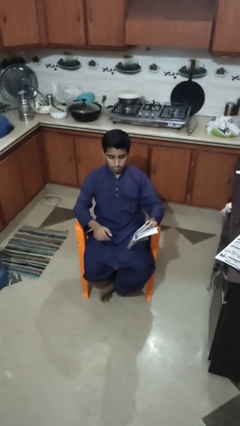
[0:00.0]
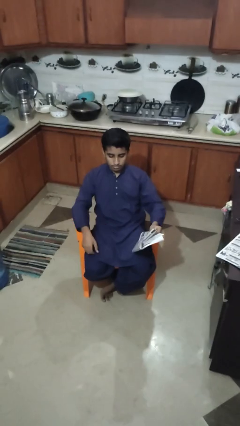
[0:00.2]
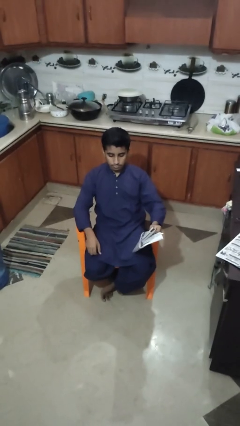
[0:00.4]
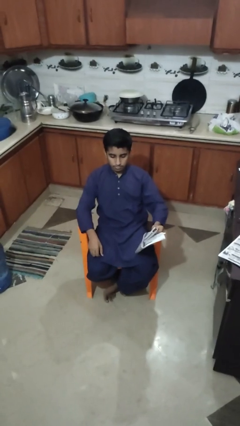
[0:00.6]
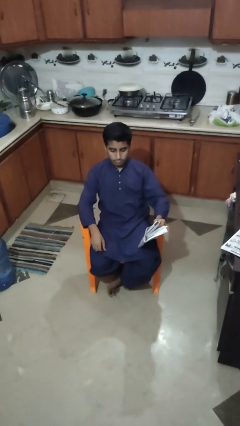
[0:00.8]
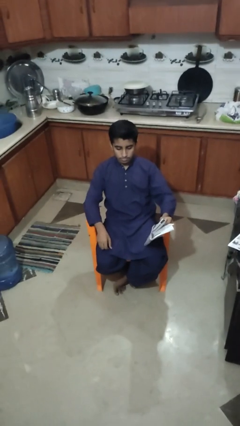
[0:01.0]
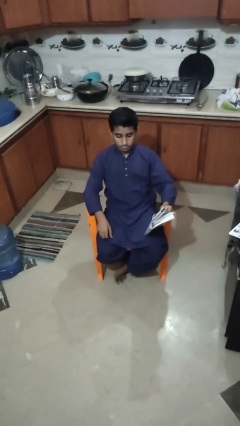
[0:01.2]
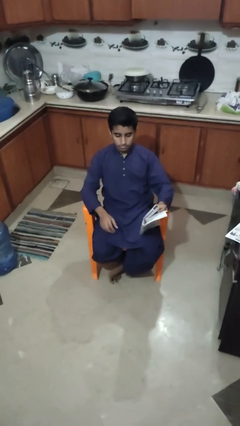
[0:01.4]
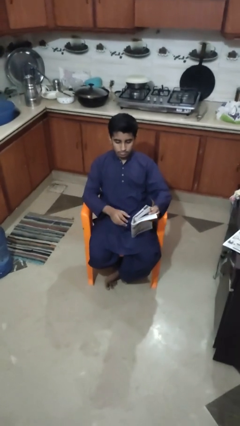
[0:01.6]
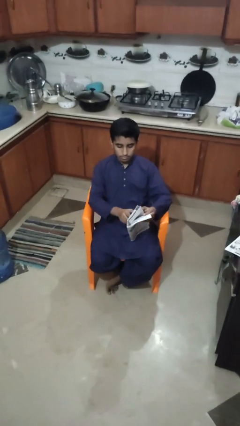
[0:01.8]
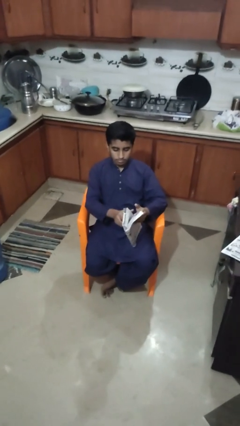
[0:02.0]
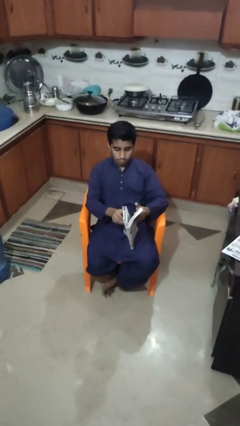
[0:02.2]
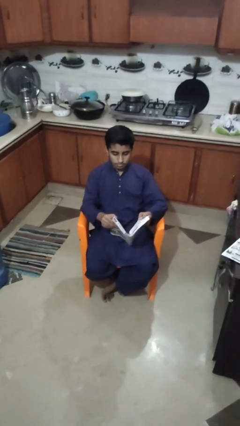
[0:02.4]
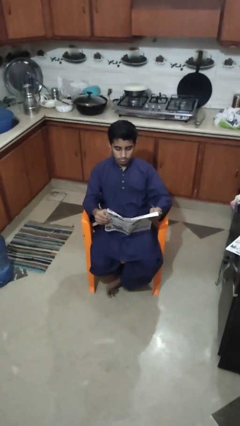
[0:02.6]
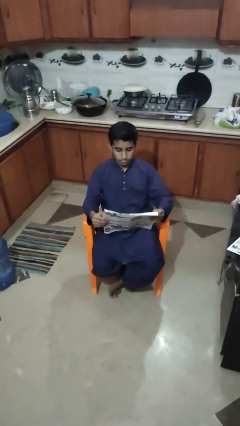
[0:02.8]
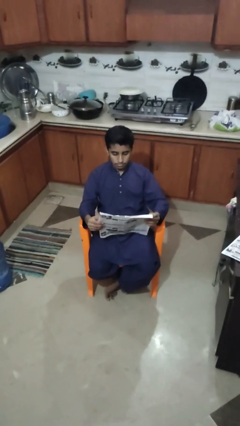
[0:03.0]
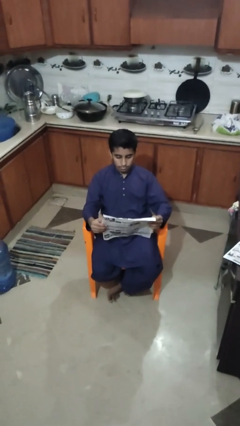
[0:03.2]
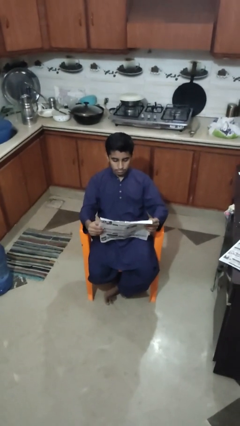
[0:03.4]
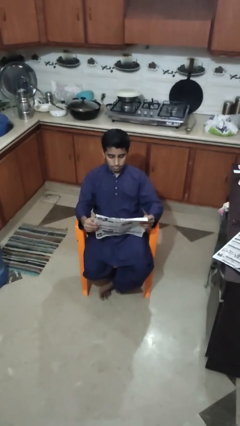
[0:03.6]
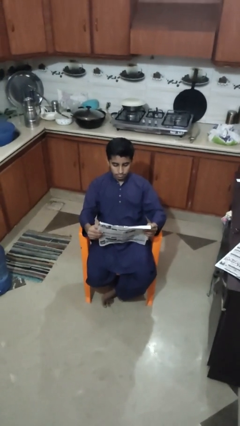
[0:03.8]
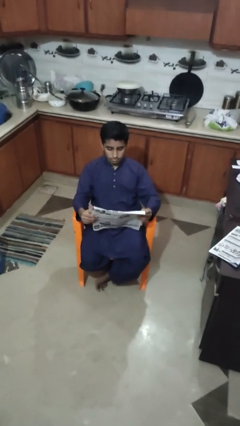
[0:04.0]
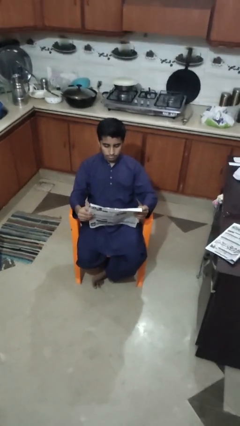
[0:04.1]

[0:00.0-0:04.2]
person reads newspaper

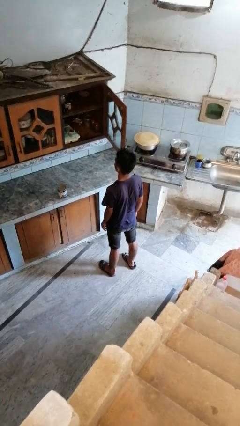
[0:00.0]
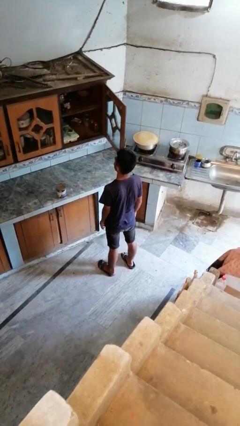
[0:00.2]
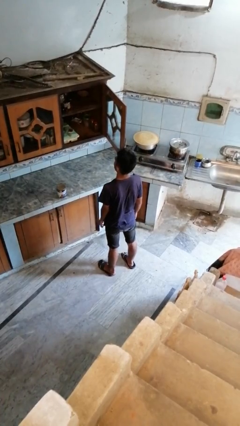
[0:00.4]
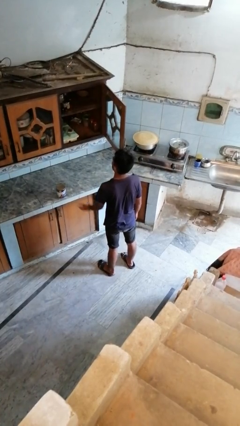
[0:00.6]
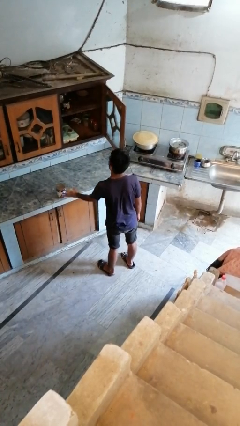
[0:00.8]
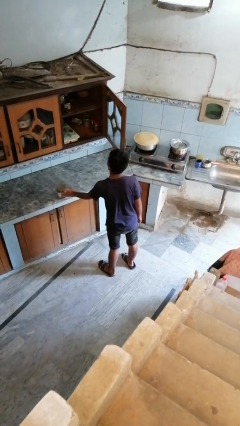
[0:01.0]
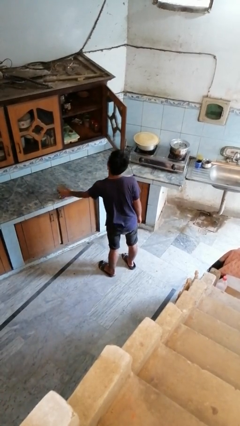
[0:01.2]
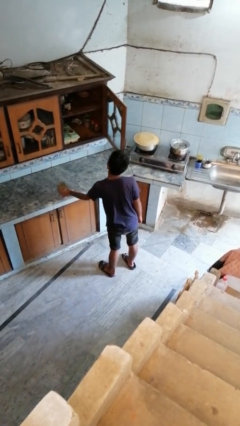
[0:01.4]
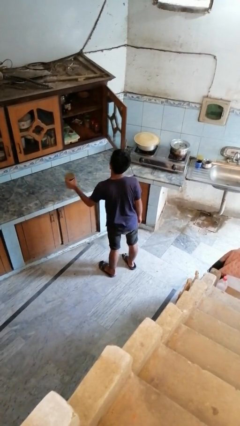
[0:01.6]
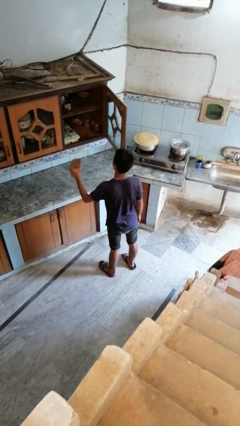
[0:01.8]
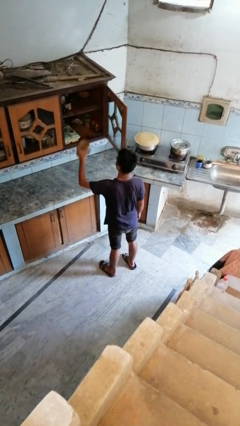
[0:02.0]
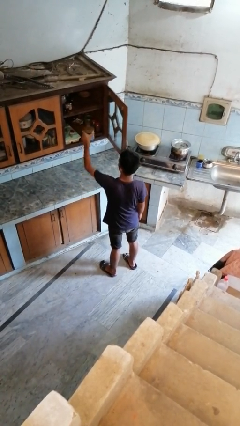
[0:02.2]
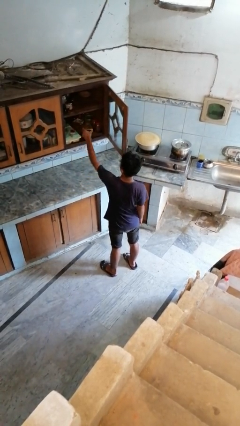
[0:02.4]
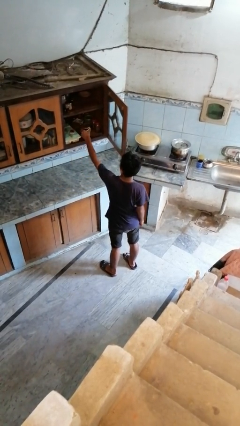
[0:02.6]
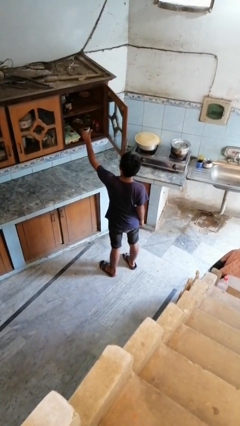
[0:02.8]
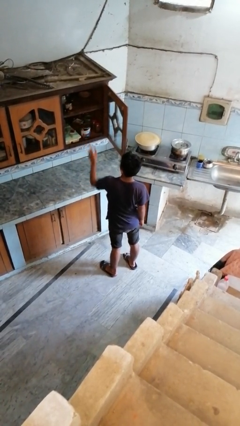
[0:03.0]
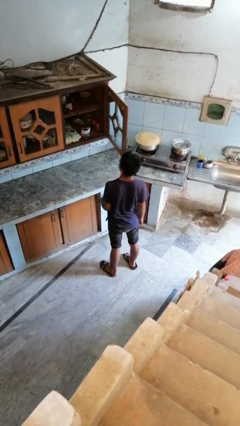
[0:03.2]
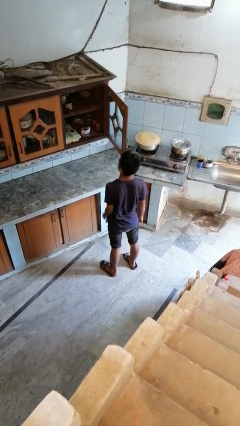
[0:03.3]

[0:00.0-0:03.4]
person puts object in cabinet

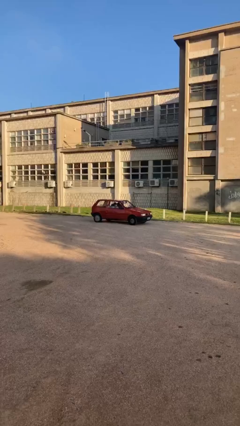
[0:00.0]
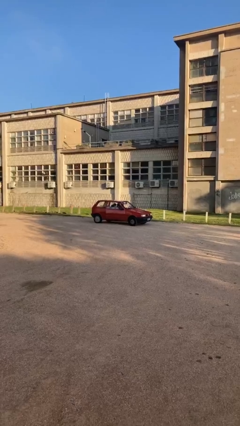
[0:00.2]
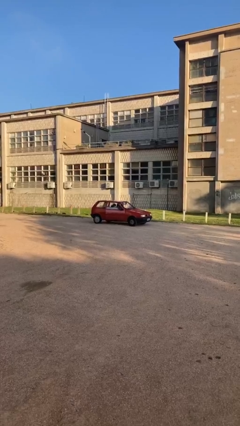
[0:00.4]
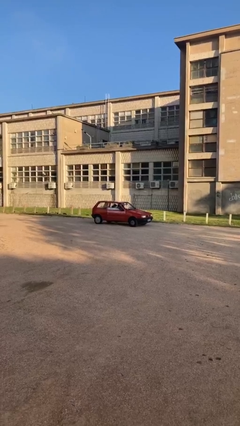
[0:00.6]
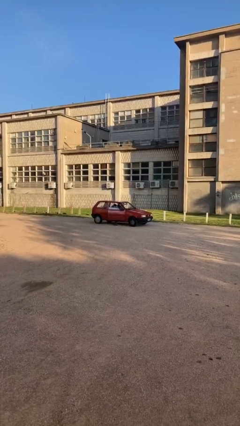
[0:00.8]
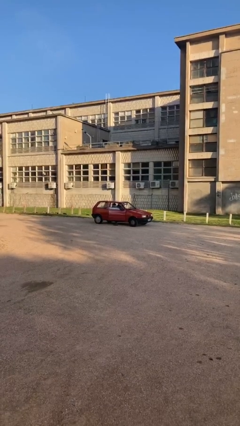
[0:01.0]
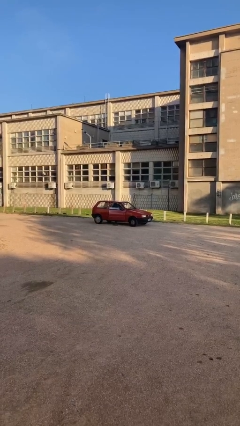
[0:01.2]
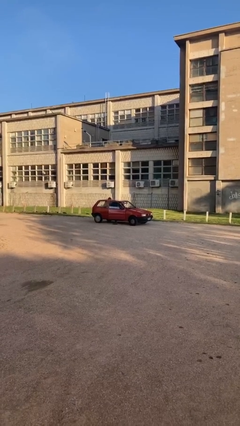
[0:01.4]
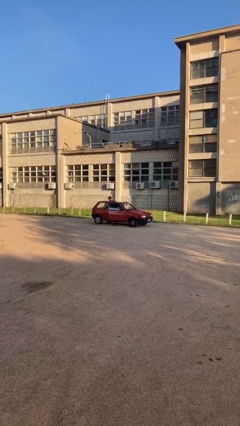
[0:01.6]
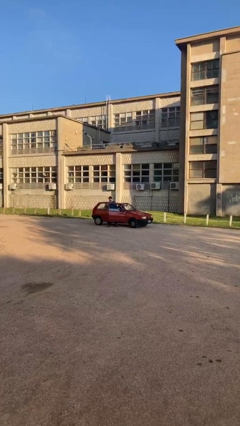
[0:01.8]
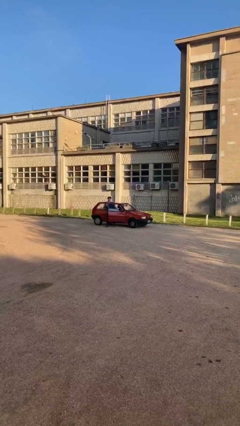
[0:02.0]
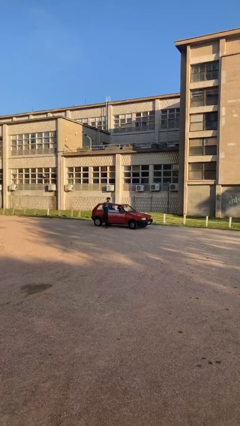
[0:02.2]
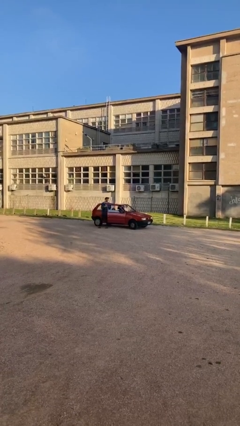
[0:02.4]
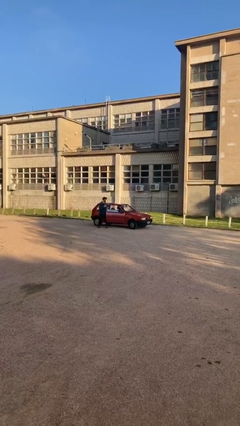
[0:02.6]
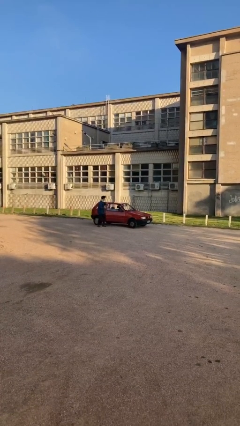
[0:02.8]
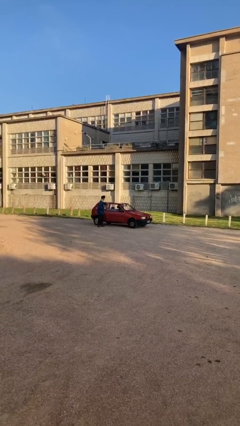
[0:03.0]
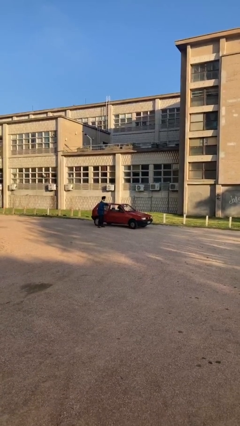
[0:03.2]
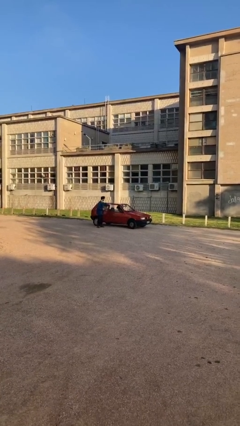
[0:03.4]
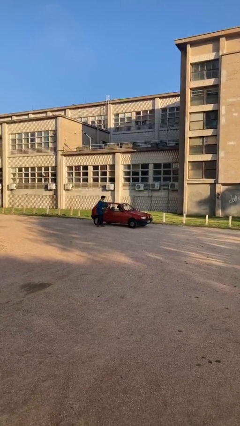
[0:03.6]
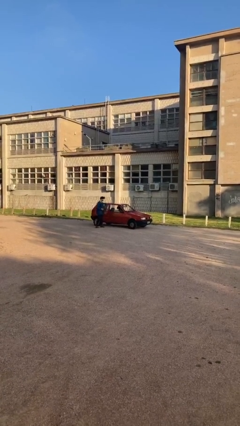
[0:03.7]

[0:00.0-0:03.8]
car drops off person

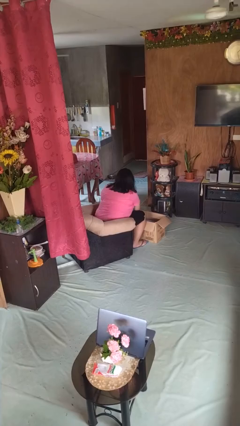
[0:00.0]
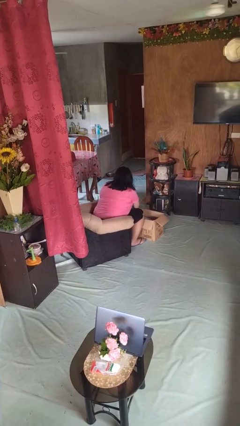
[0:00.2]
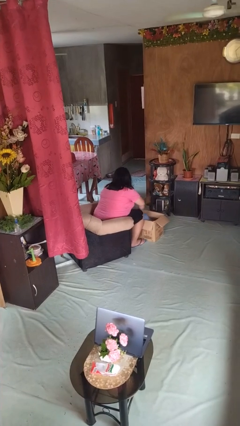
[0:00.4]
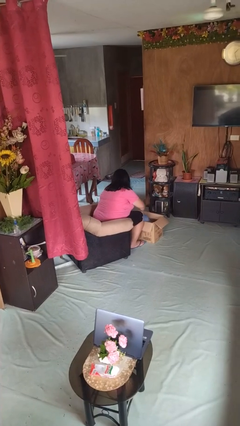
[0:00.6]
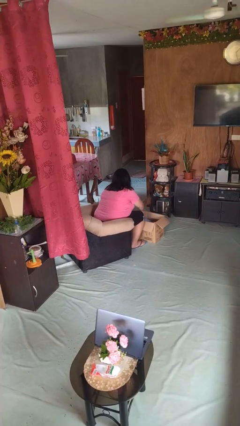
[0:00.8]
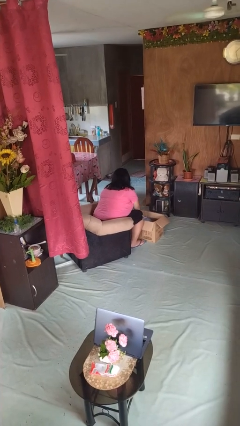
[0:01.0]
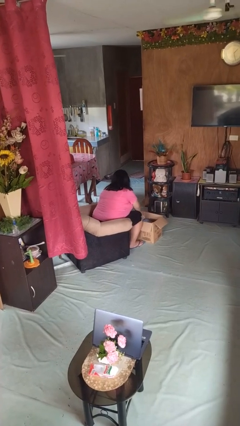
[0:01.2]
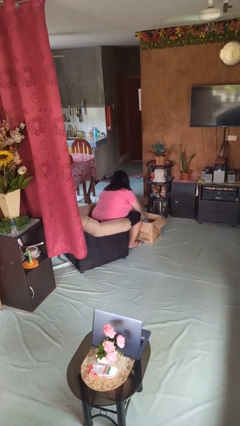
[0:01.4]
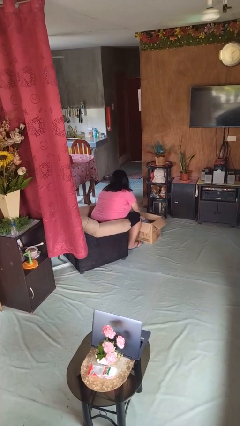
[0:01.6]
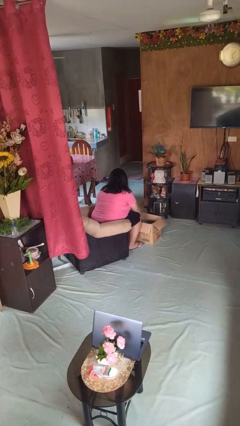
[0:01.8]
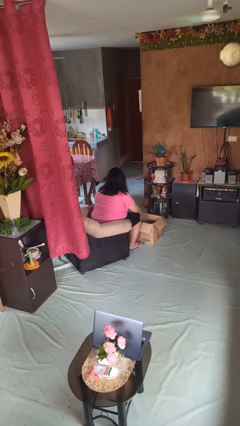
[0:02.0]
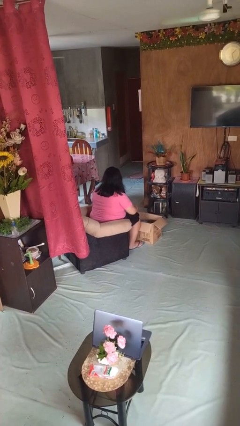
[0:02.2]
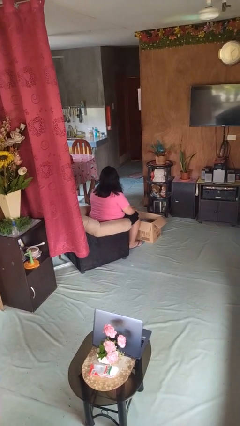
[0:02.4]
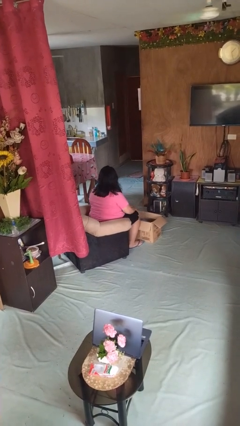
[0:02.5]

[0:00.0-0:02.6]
person searches in box

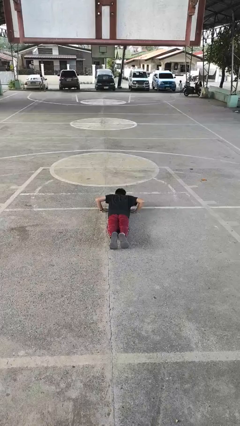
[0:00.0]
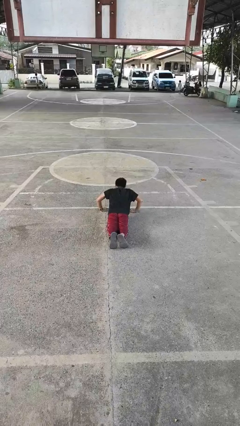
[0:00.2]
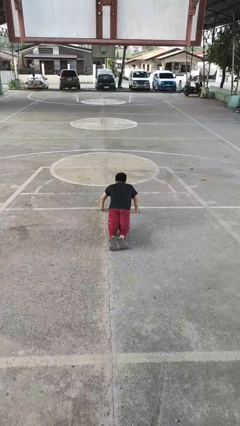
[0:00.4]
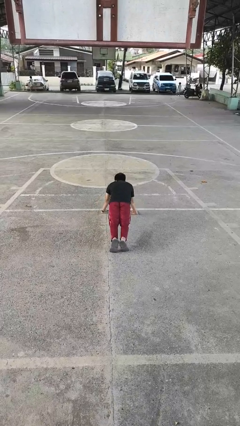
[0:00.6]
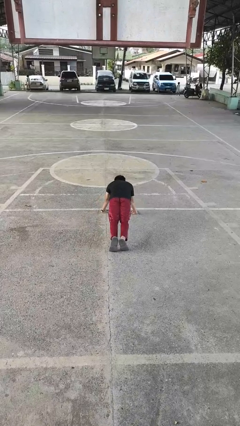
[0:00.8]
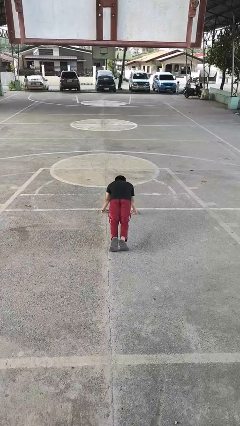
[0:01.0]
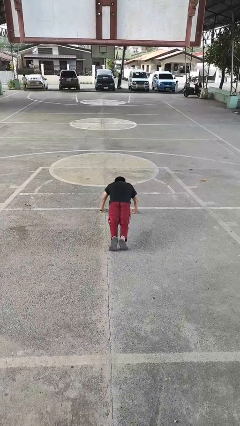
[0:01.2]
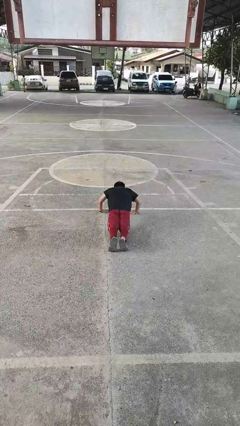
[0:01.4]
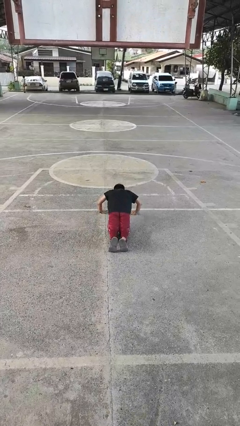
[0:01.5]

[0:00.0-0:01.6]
person exercises with pushup

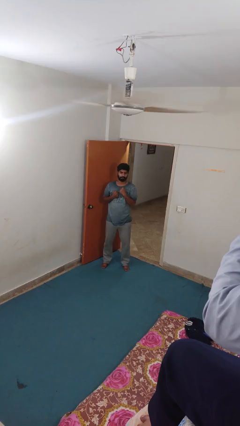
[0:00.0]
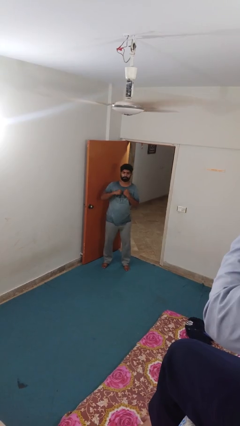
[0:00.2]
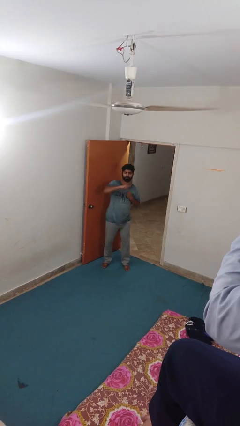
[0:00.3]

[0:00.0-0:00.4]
person punches

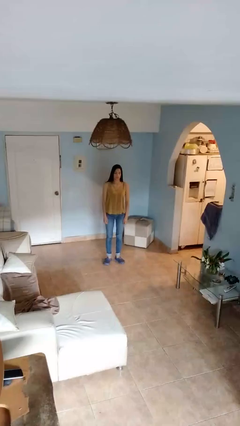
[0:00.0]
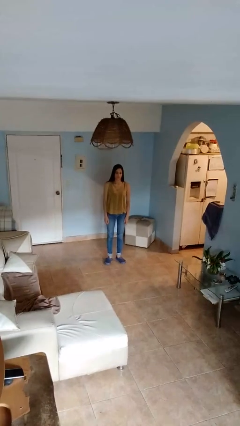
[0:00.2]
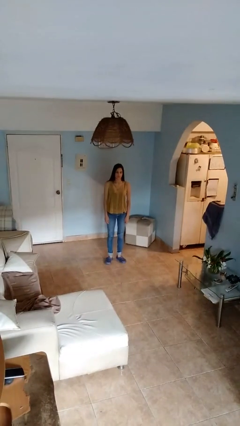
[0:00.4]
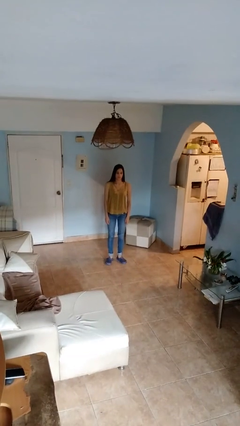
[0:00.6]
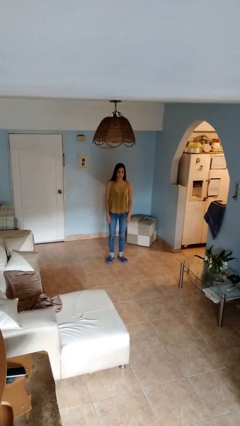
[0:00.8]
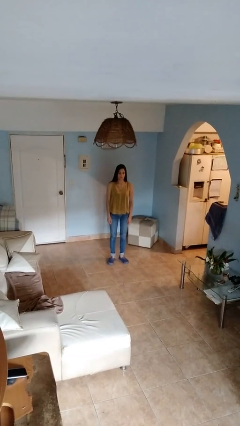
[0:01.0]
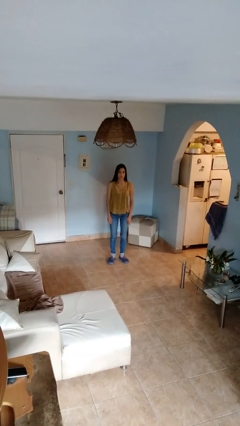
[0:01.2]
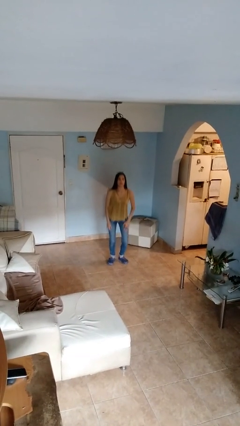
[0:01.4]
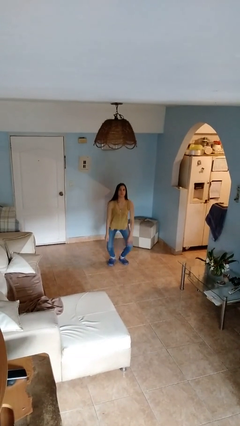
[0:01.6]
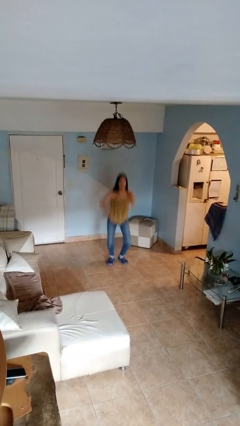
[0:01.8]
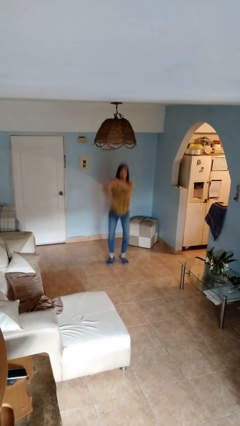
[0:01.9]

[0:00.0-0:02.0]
person jumps
